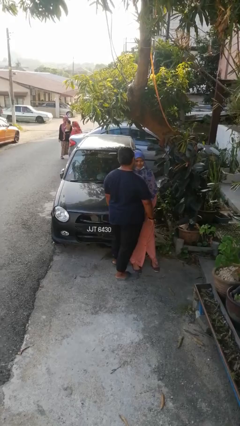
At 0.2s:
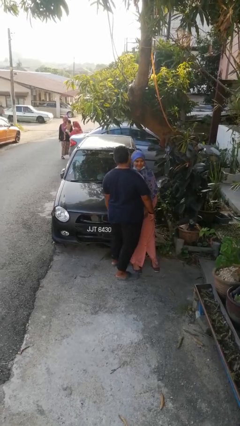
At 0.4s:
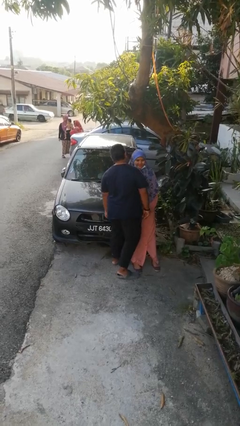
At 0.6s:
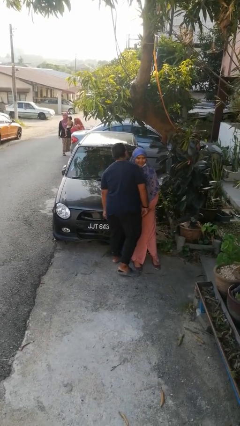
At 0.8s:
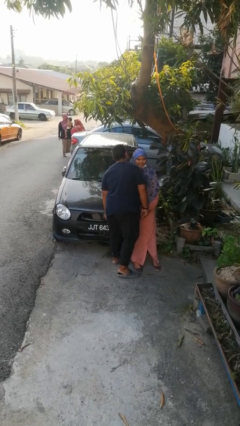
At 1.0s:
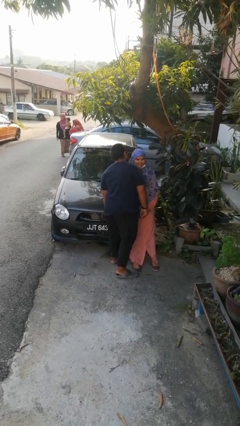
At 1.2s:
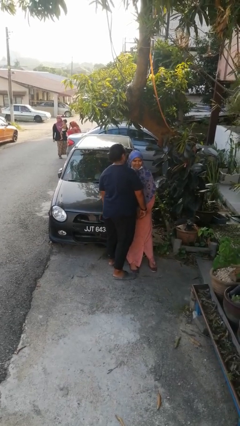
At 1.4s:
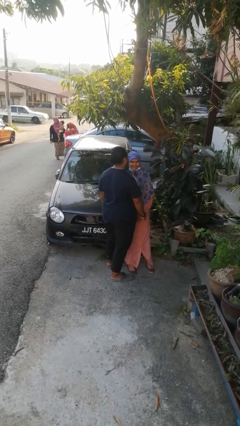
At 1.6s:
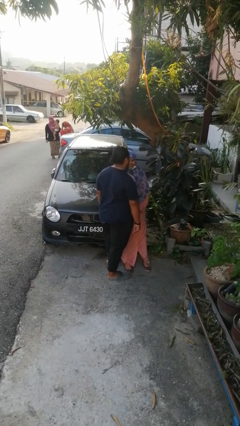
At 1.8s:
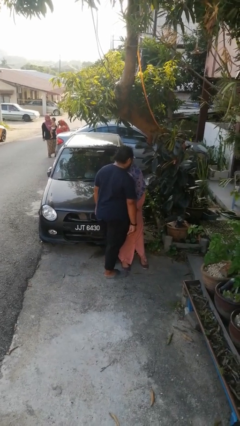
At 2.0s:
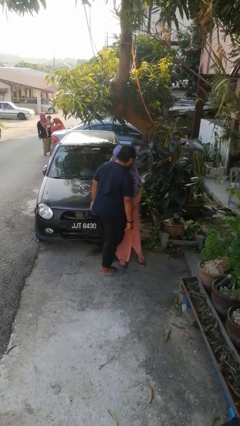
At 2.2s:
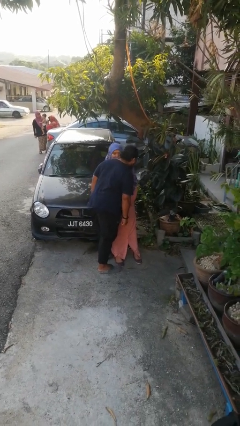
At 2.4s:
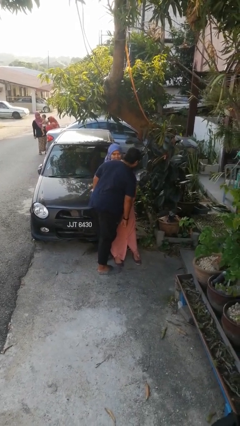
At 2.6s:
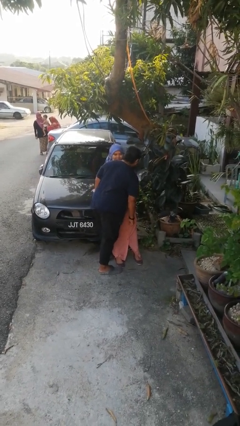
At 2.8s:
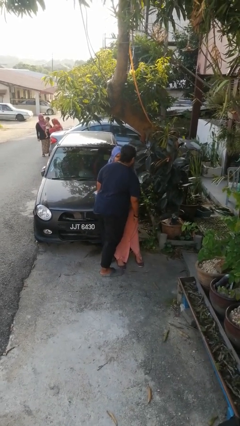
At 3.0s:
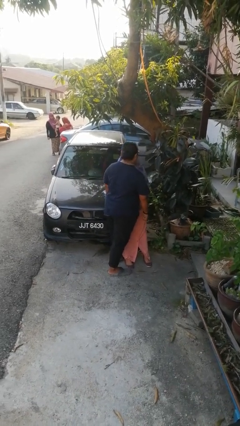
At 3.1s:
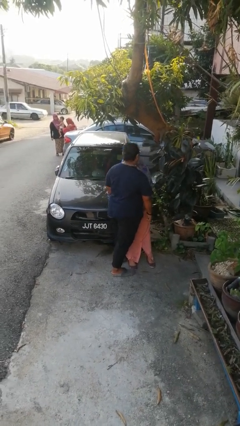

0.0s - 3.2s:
person kisses cheek of person

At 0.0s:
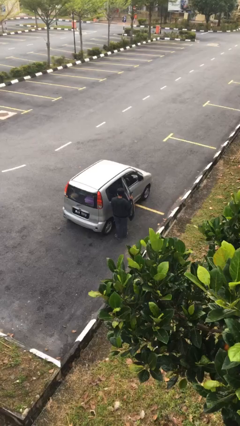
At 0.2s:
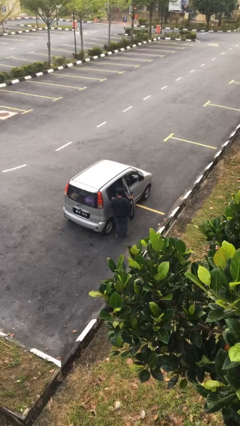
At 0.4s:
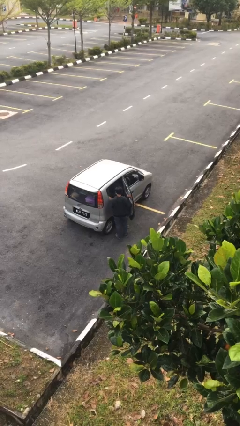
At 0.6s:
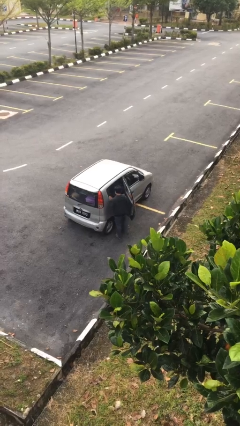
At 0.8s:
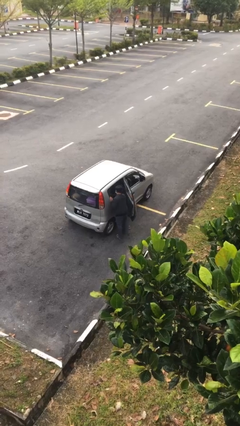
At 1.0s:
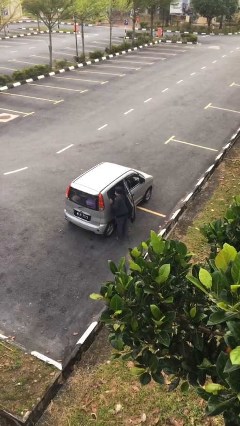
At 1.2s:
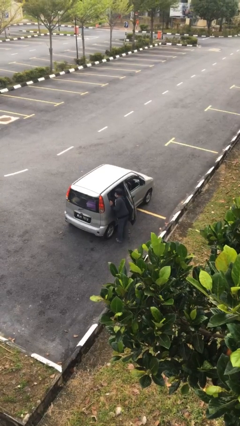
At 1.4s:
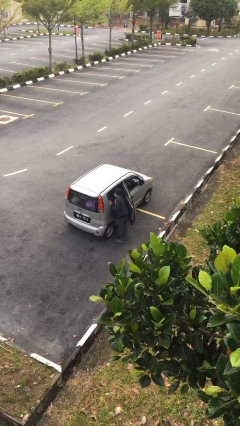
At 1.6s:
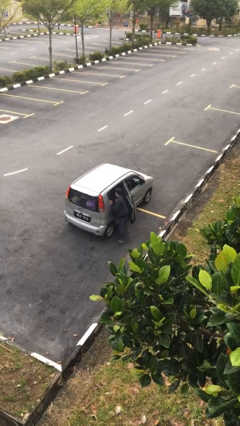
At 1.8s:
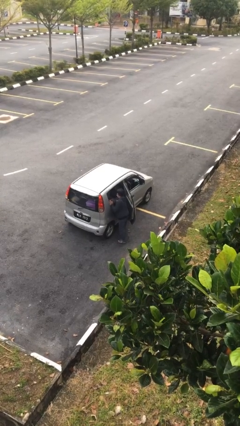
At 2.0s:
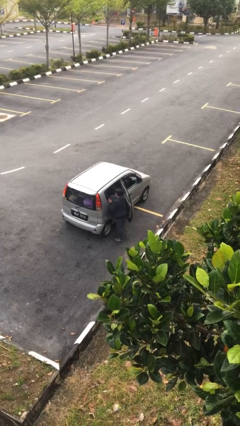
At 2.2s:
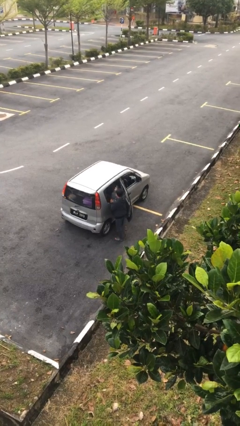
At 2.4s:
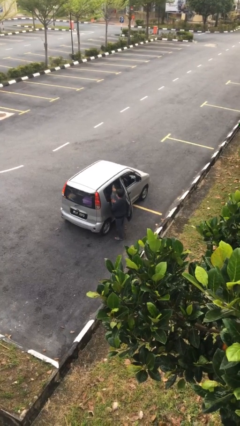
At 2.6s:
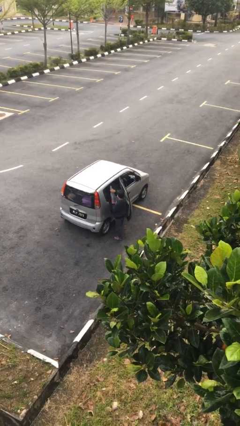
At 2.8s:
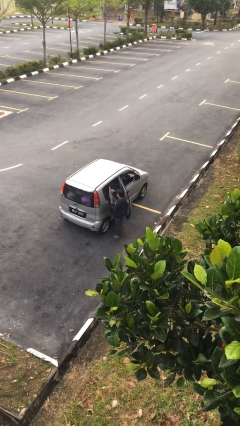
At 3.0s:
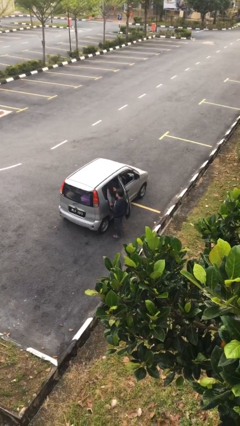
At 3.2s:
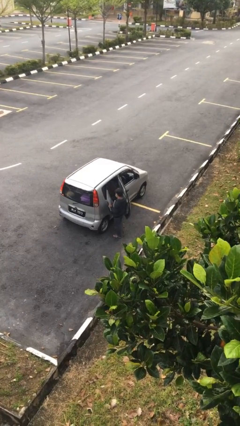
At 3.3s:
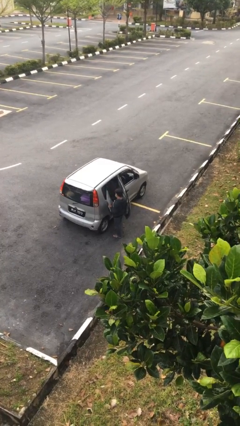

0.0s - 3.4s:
person unloads car

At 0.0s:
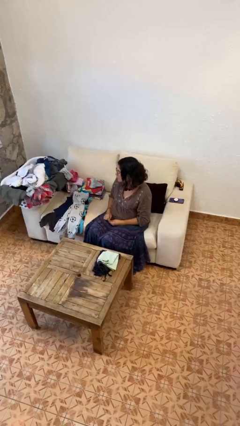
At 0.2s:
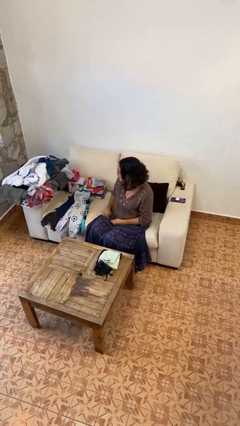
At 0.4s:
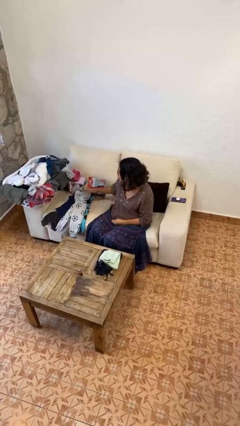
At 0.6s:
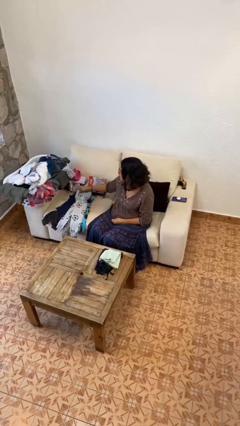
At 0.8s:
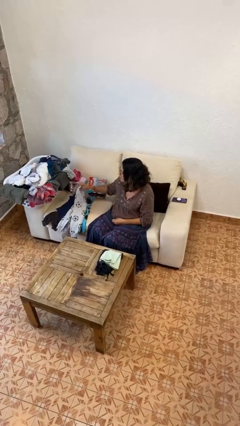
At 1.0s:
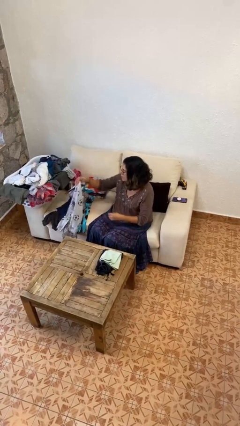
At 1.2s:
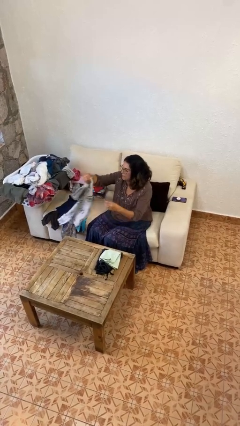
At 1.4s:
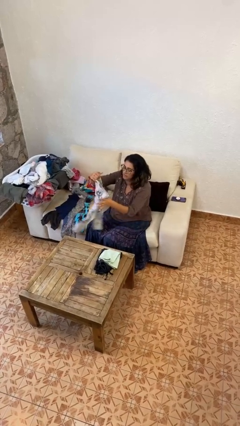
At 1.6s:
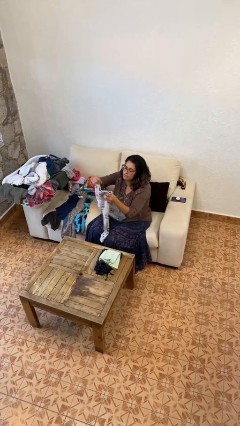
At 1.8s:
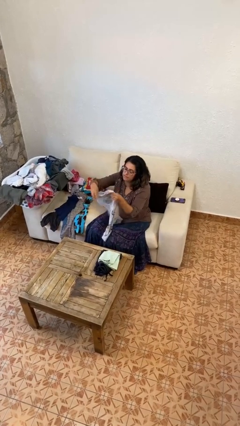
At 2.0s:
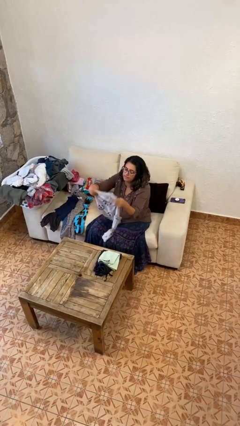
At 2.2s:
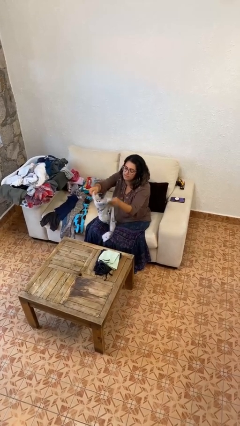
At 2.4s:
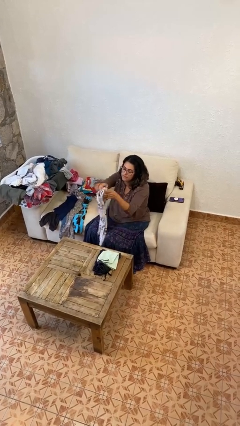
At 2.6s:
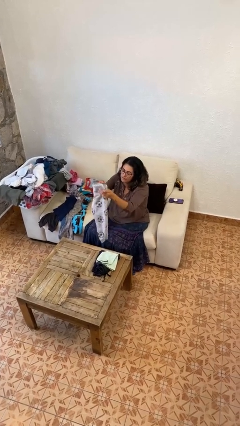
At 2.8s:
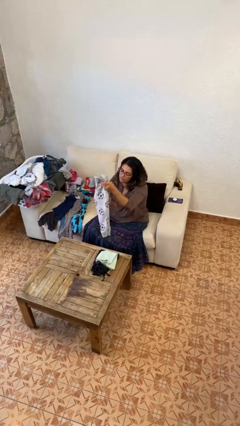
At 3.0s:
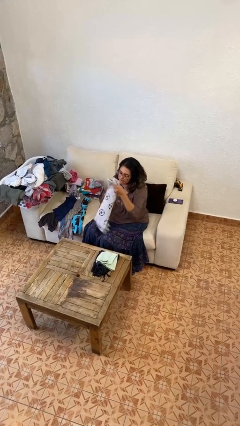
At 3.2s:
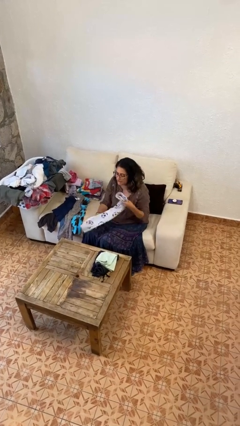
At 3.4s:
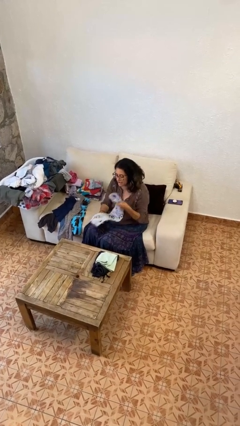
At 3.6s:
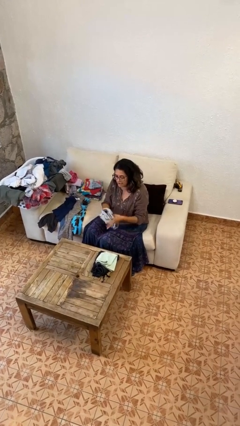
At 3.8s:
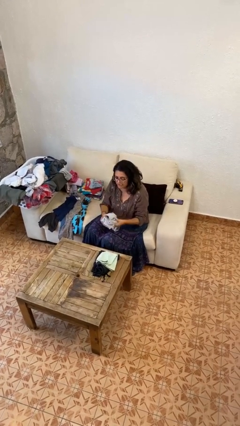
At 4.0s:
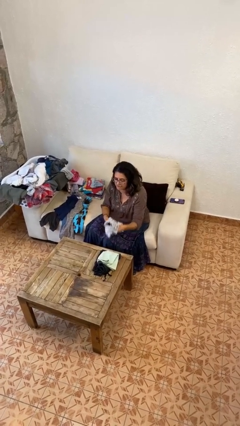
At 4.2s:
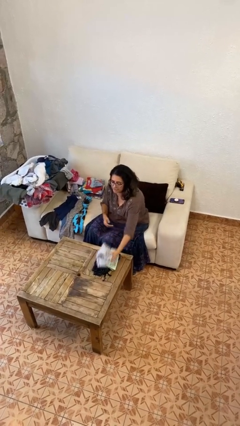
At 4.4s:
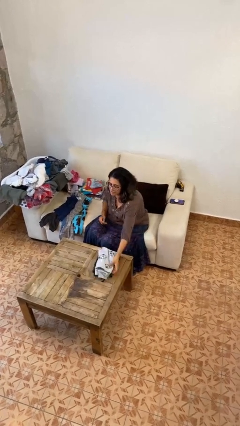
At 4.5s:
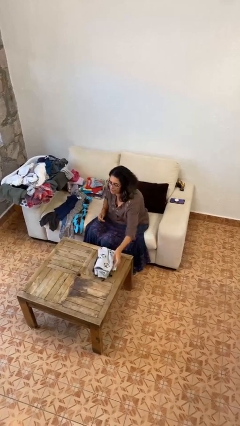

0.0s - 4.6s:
person folds pants

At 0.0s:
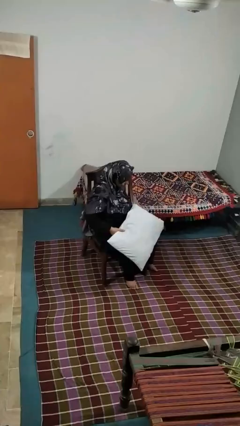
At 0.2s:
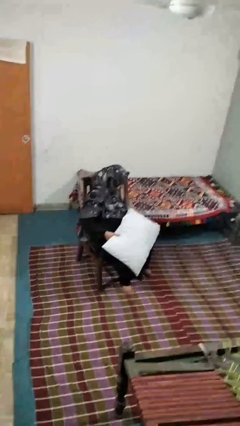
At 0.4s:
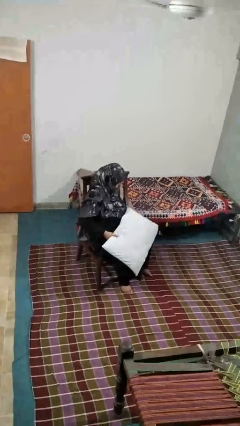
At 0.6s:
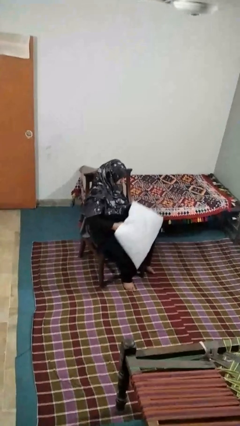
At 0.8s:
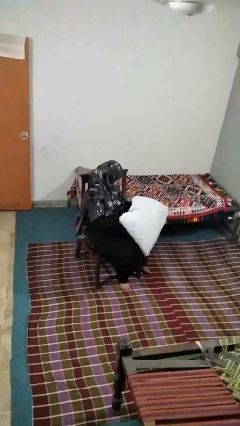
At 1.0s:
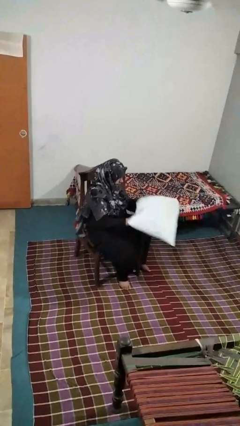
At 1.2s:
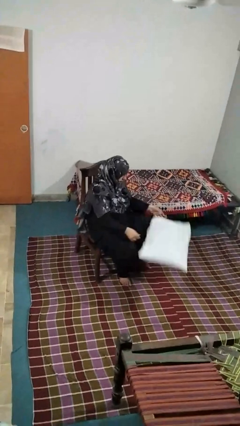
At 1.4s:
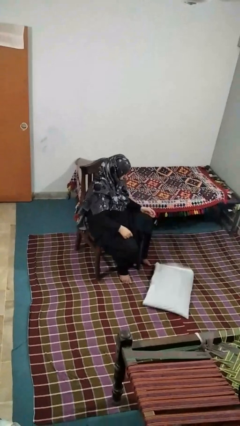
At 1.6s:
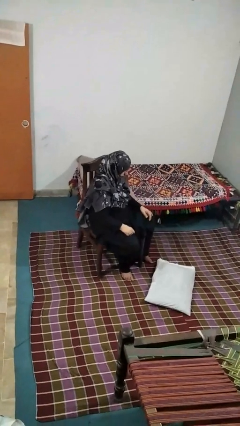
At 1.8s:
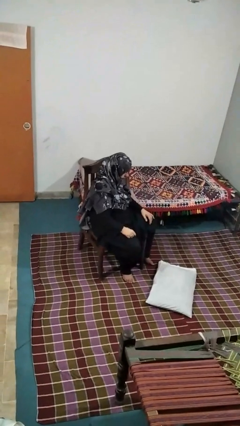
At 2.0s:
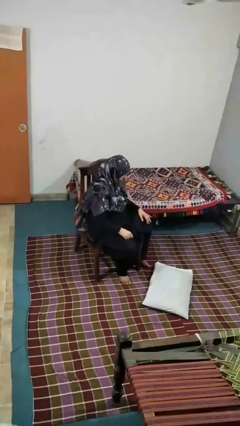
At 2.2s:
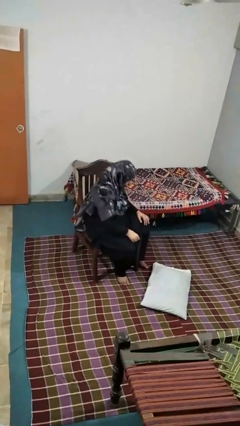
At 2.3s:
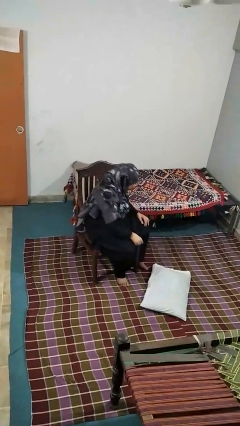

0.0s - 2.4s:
person drops object

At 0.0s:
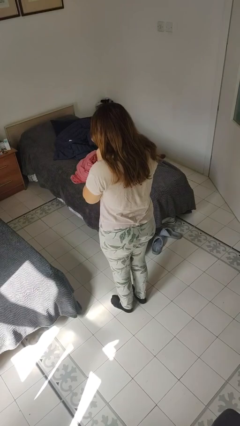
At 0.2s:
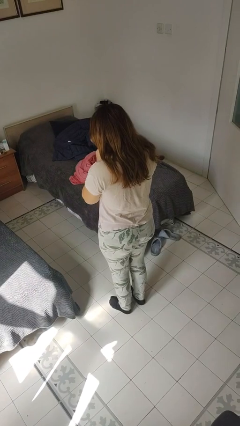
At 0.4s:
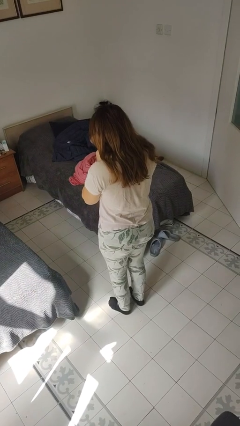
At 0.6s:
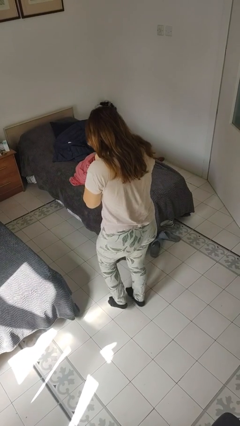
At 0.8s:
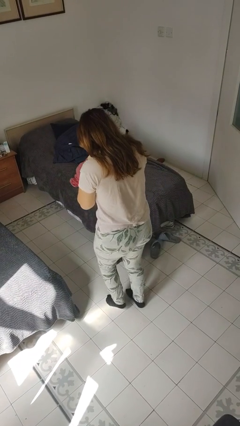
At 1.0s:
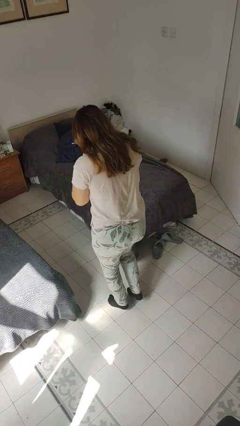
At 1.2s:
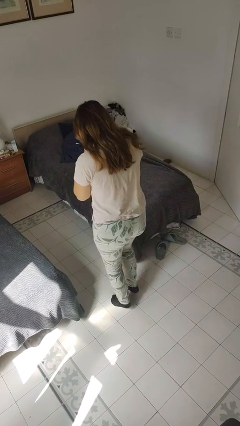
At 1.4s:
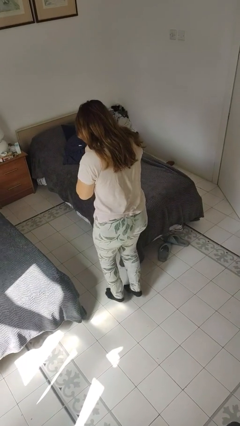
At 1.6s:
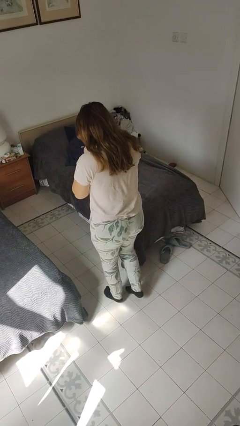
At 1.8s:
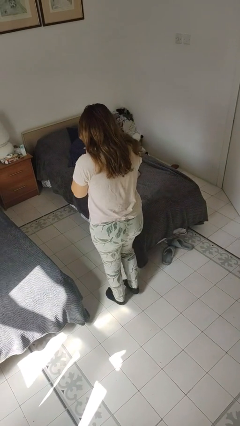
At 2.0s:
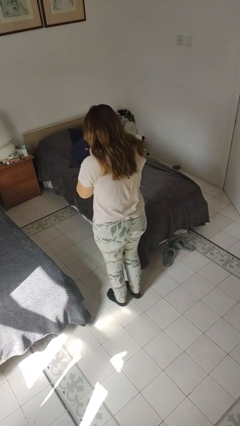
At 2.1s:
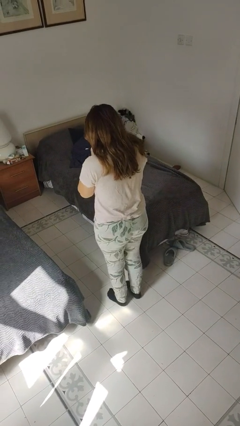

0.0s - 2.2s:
person walks tiptoe

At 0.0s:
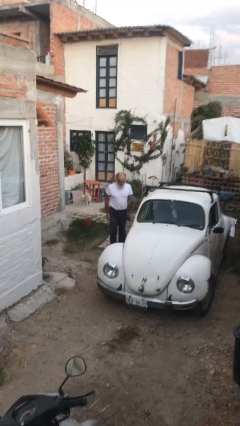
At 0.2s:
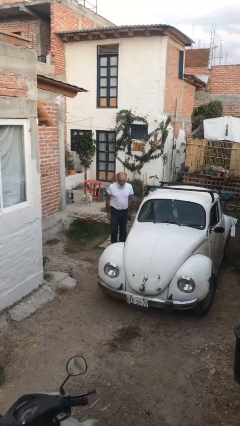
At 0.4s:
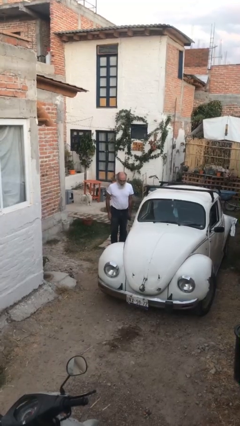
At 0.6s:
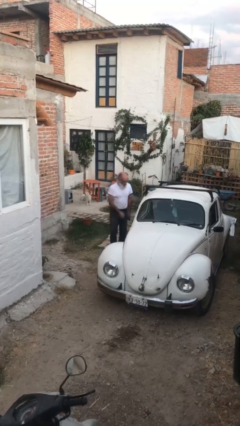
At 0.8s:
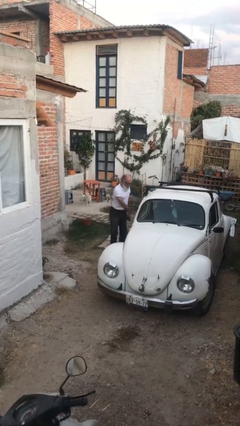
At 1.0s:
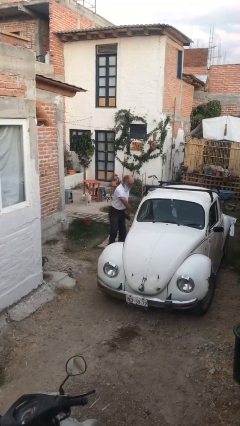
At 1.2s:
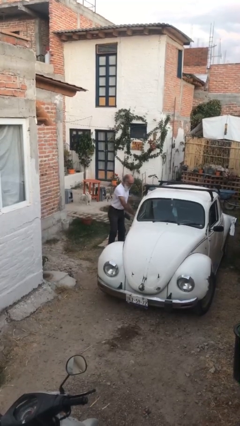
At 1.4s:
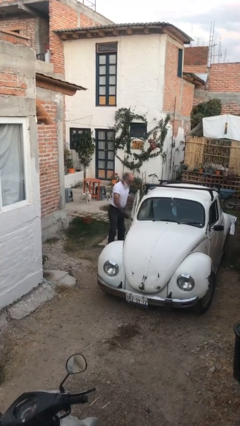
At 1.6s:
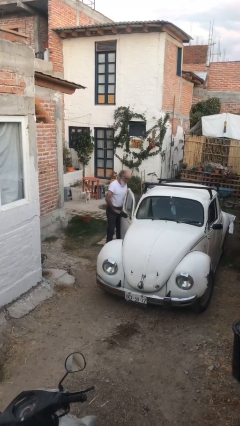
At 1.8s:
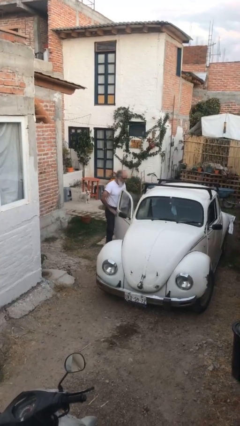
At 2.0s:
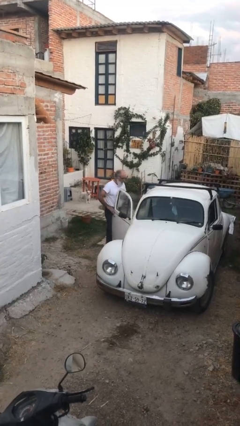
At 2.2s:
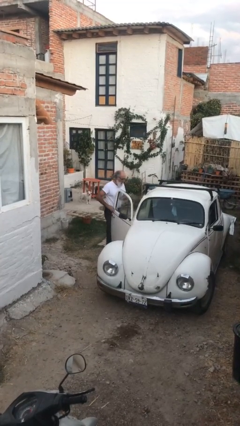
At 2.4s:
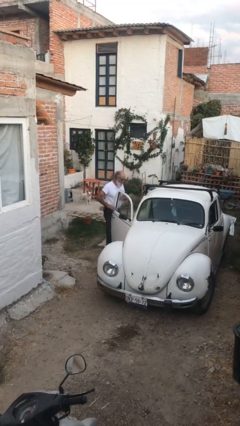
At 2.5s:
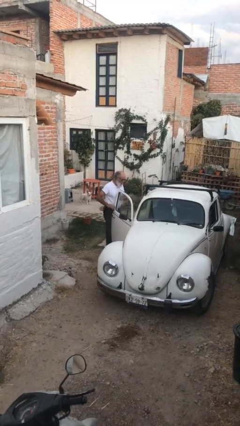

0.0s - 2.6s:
person opens car door
